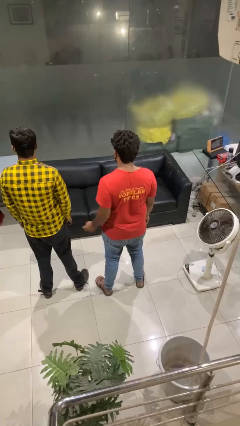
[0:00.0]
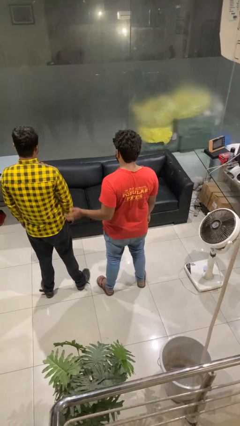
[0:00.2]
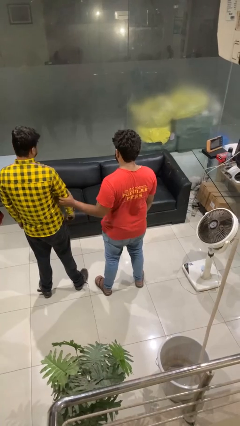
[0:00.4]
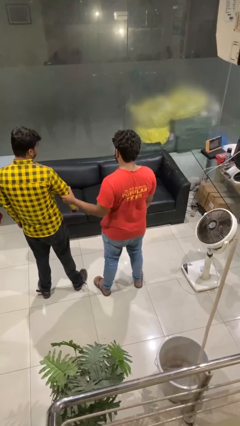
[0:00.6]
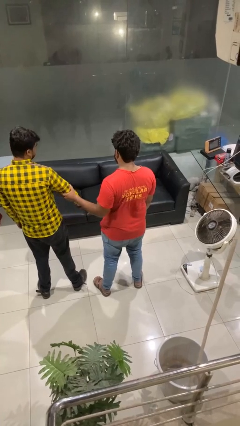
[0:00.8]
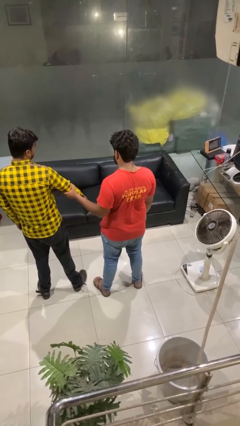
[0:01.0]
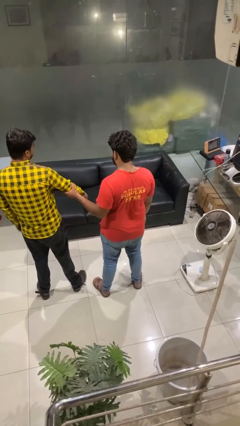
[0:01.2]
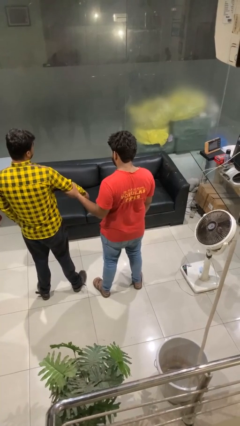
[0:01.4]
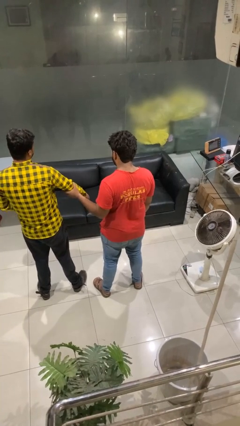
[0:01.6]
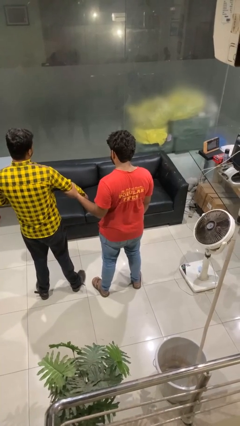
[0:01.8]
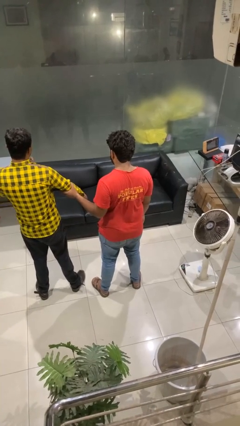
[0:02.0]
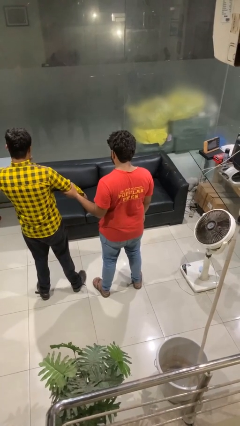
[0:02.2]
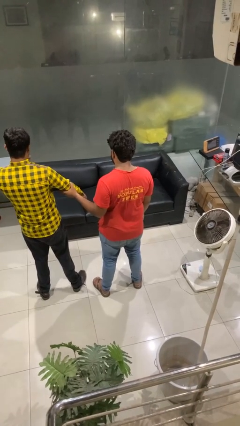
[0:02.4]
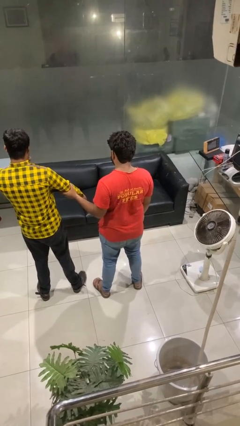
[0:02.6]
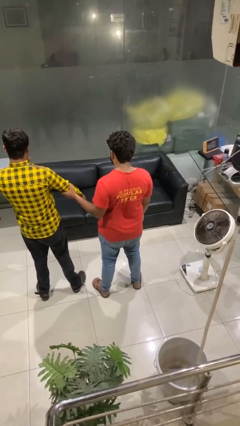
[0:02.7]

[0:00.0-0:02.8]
person grabs person by forearm

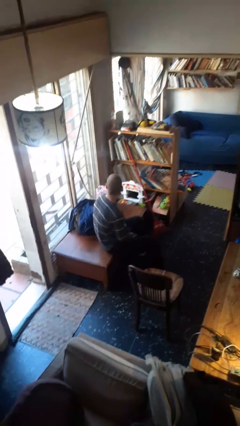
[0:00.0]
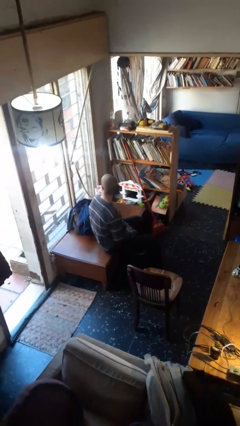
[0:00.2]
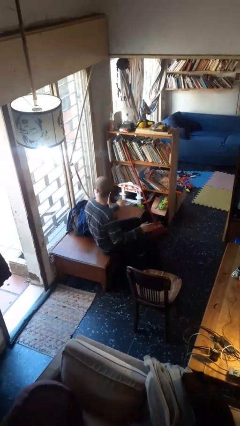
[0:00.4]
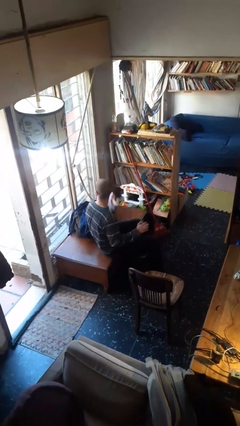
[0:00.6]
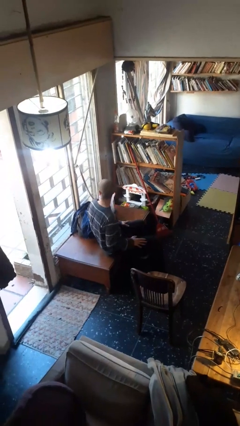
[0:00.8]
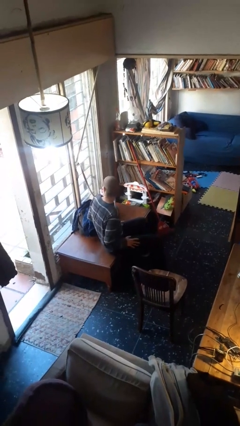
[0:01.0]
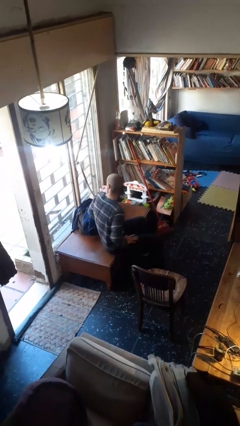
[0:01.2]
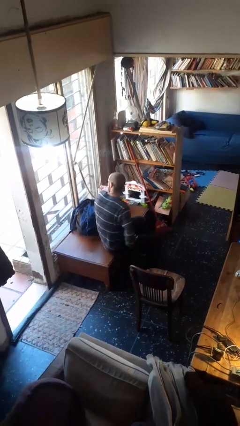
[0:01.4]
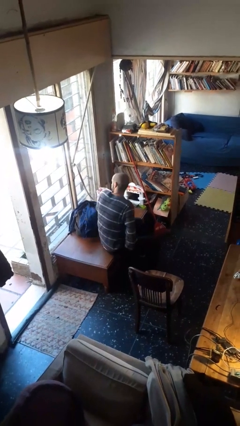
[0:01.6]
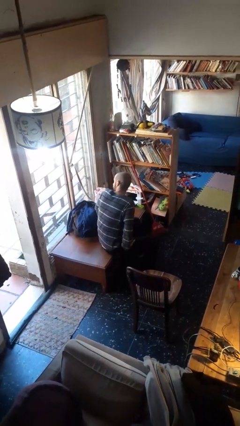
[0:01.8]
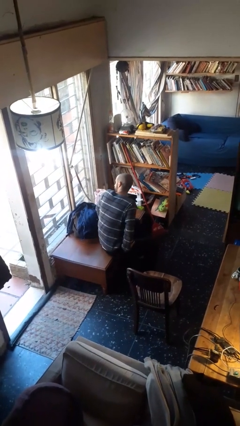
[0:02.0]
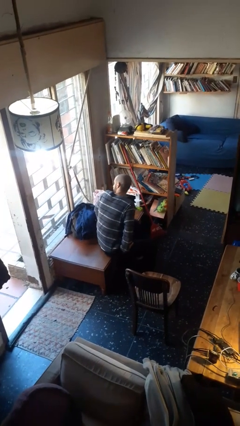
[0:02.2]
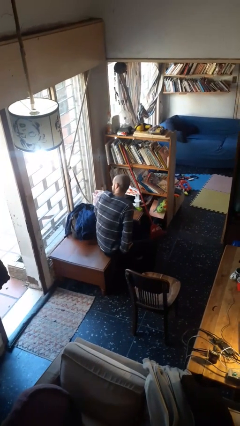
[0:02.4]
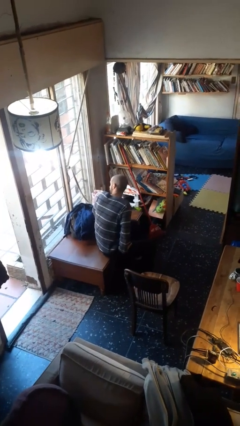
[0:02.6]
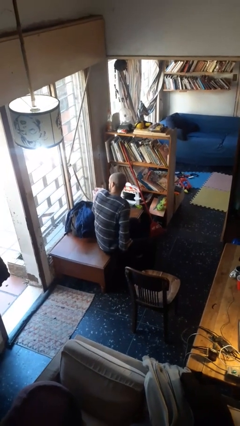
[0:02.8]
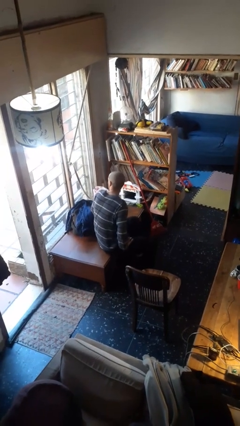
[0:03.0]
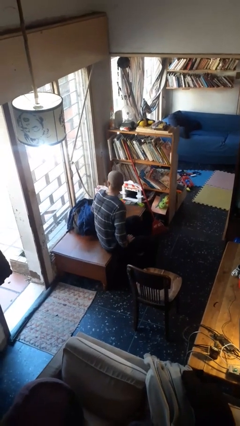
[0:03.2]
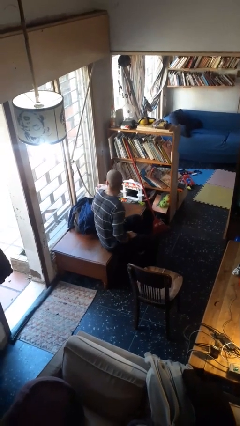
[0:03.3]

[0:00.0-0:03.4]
person slaps hands on thighs

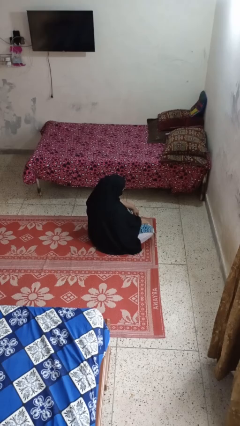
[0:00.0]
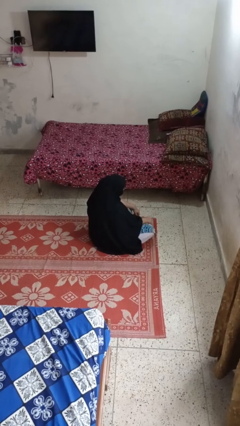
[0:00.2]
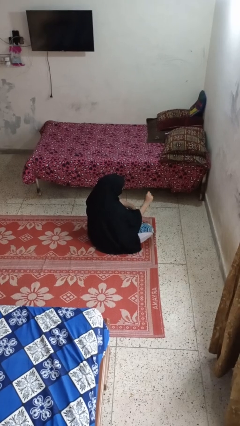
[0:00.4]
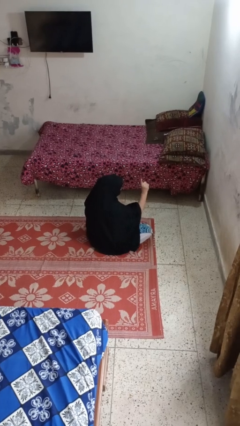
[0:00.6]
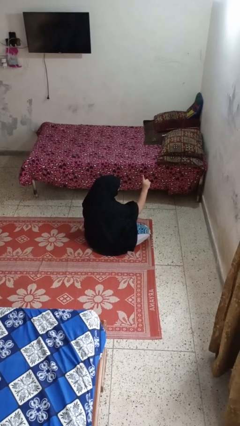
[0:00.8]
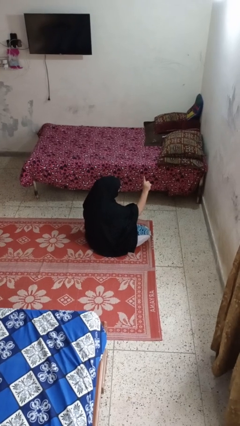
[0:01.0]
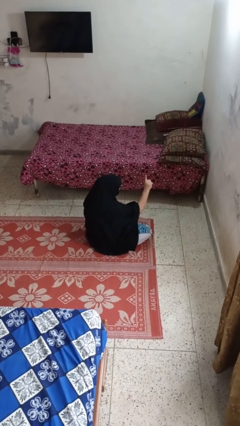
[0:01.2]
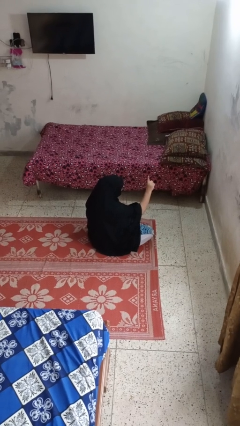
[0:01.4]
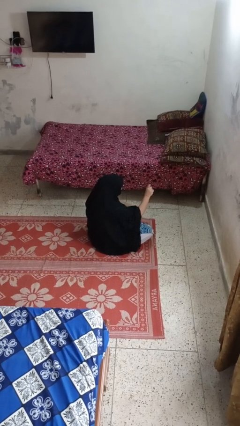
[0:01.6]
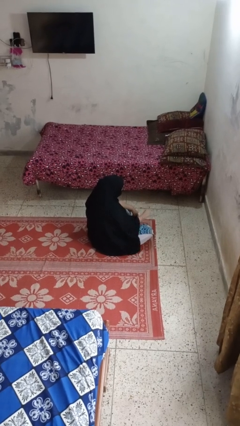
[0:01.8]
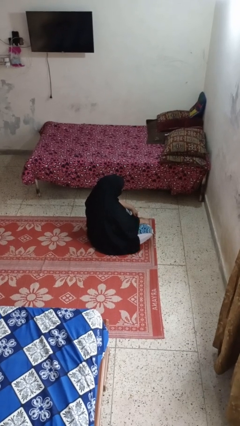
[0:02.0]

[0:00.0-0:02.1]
person gestures number one

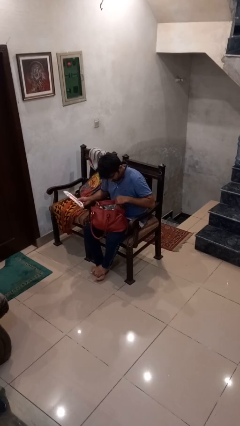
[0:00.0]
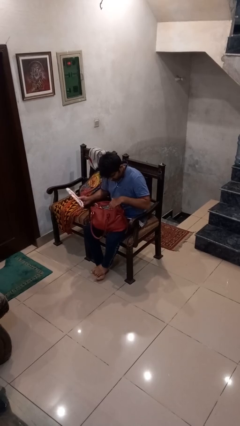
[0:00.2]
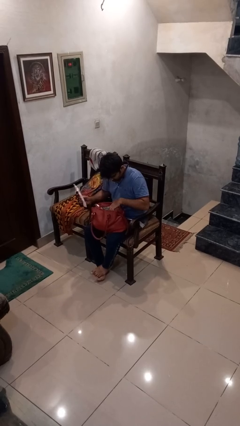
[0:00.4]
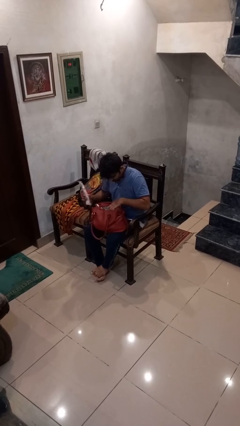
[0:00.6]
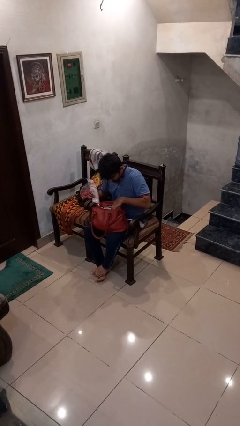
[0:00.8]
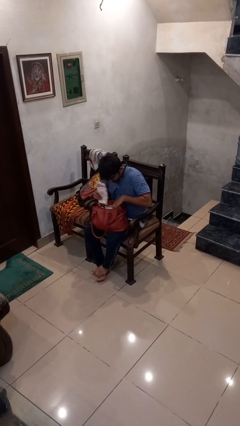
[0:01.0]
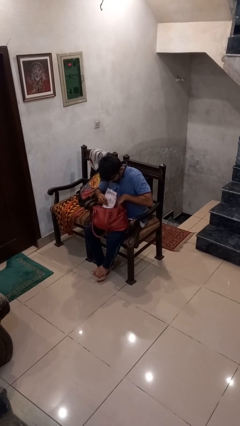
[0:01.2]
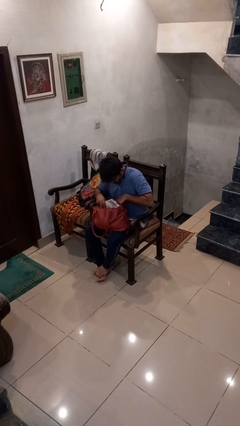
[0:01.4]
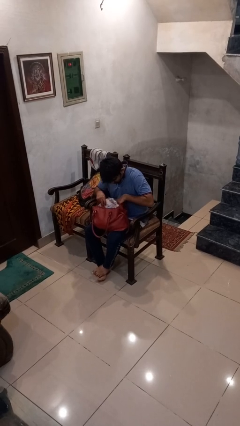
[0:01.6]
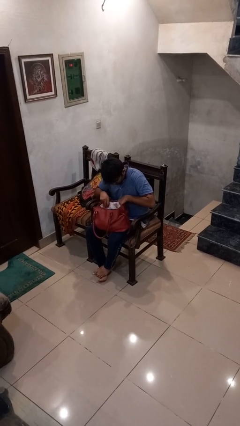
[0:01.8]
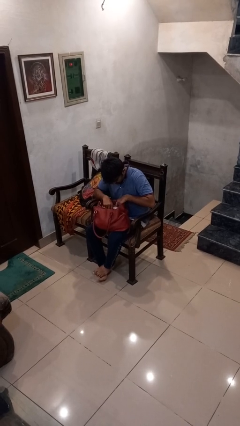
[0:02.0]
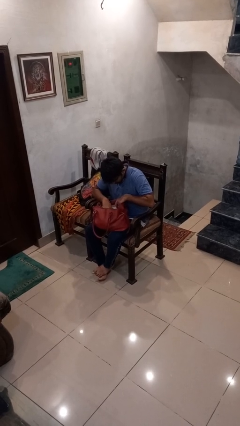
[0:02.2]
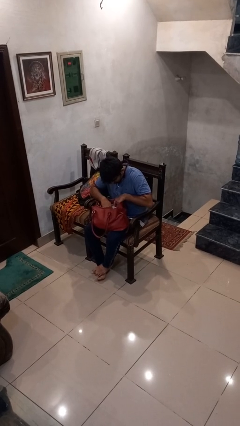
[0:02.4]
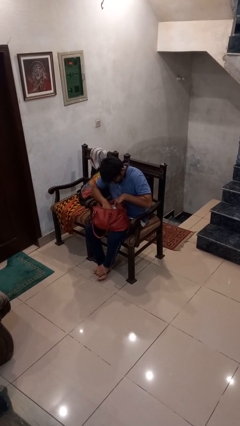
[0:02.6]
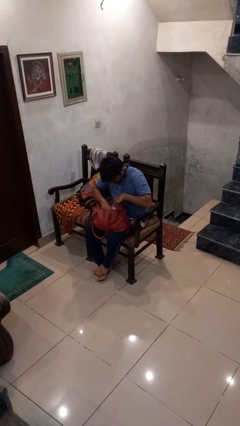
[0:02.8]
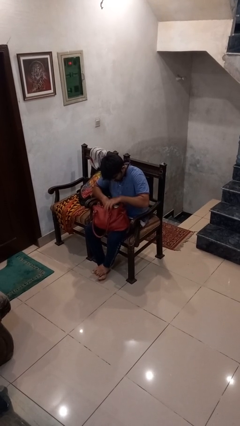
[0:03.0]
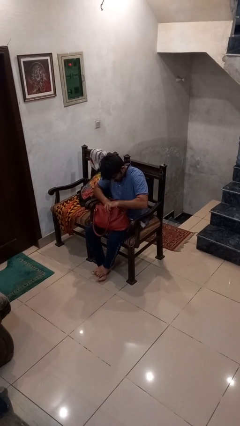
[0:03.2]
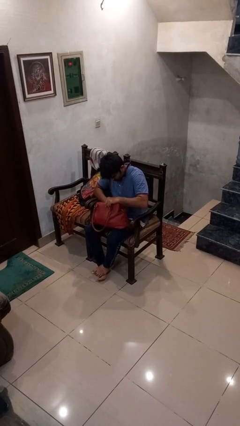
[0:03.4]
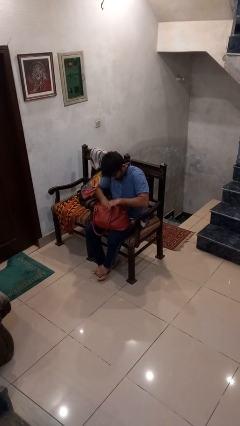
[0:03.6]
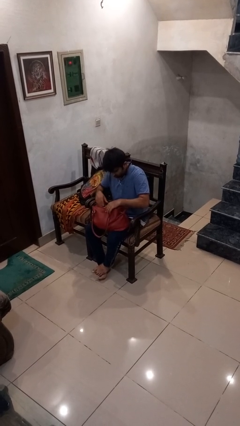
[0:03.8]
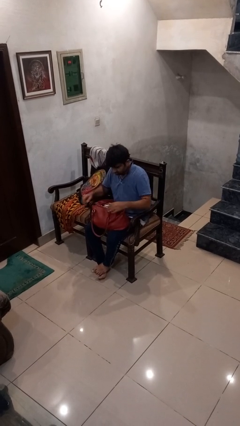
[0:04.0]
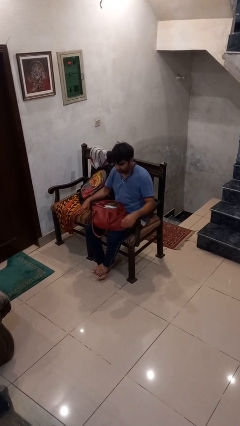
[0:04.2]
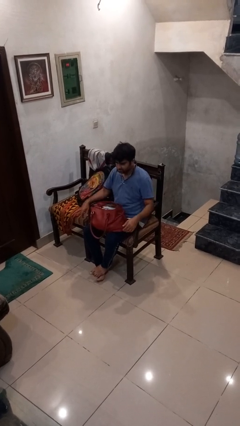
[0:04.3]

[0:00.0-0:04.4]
person puts object into purse

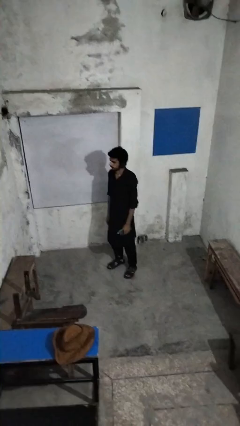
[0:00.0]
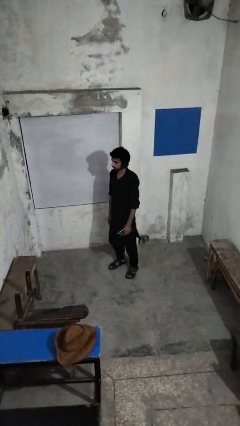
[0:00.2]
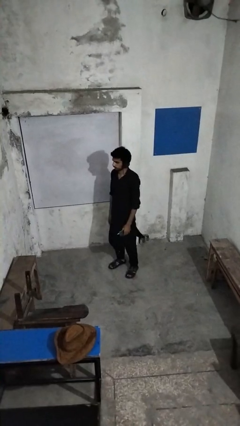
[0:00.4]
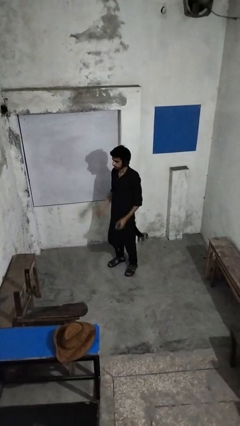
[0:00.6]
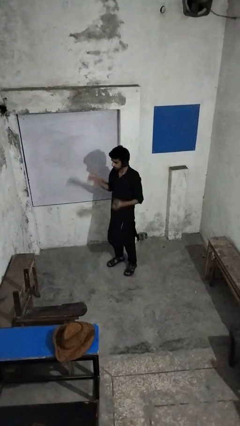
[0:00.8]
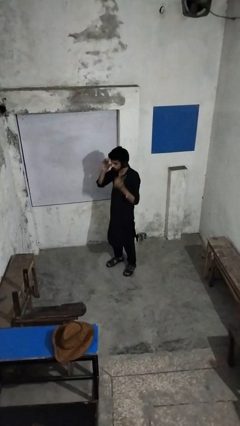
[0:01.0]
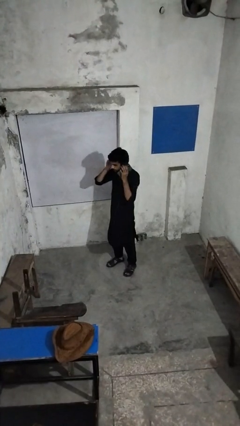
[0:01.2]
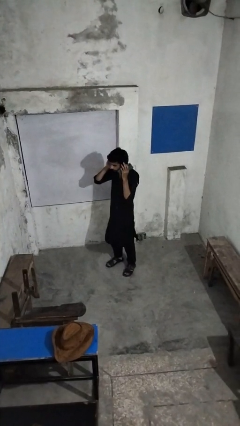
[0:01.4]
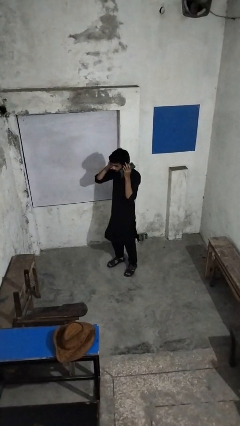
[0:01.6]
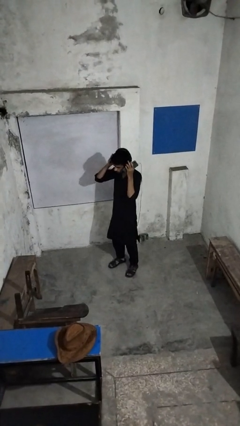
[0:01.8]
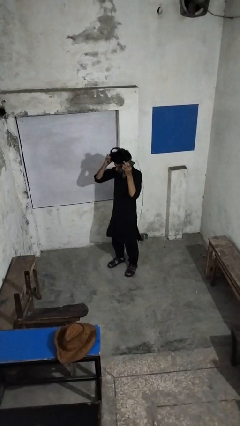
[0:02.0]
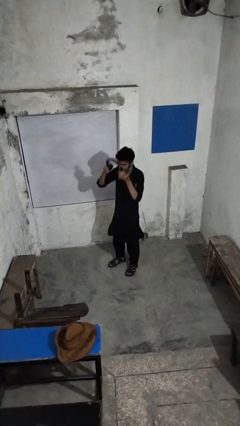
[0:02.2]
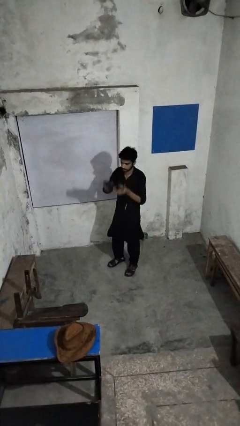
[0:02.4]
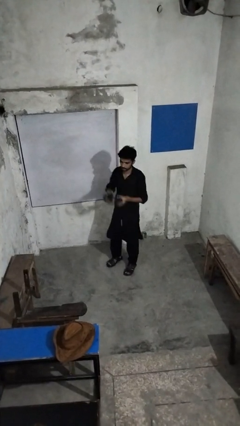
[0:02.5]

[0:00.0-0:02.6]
person takes off headphones

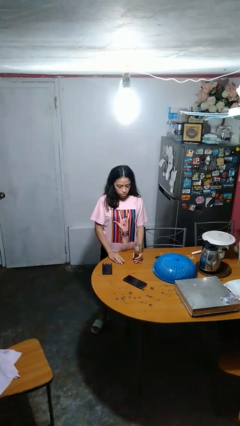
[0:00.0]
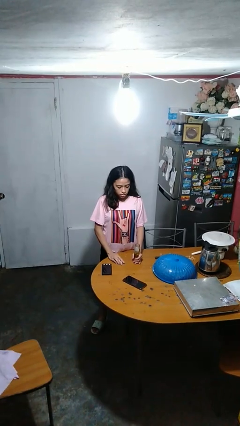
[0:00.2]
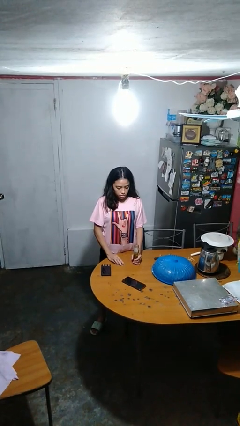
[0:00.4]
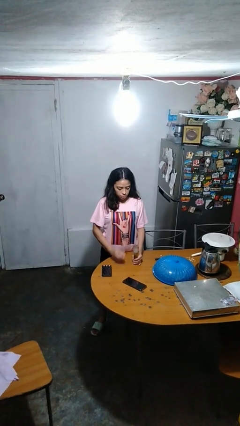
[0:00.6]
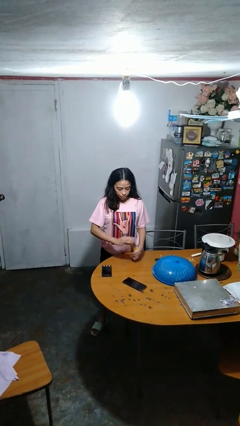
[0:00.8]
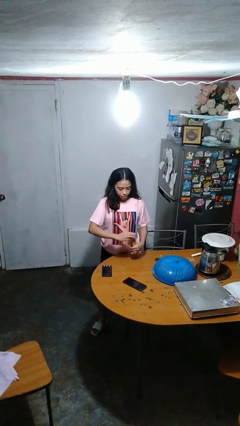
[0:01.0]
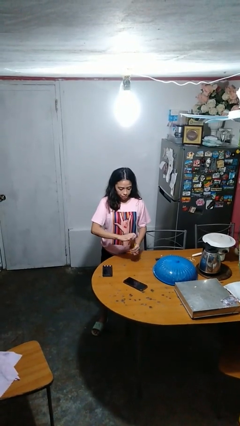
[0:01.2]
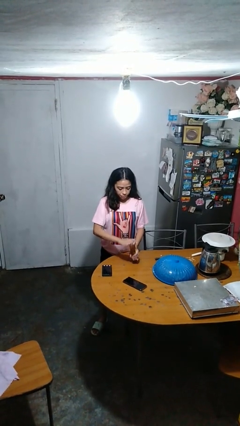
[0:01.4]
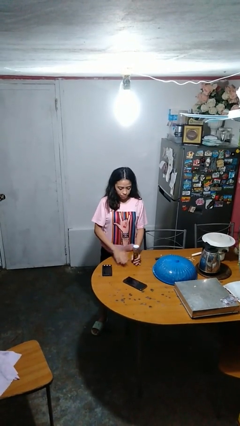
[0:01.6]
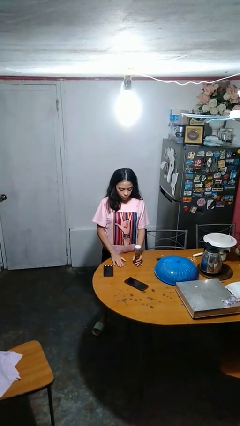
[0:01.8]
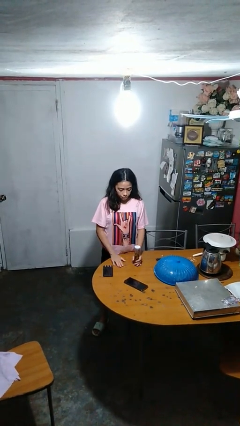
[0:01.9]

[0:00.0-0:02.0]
person closes jar

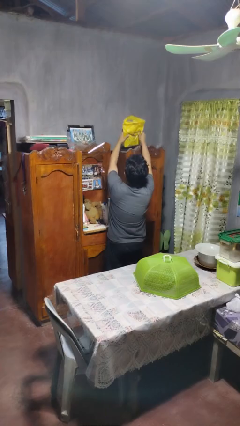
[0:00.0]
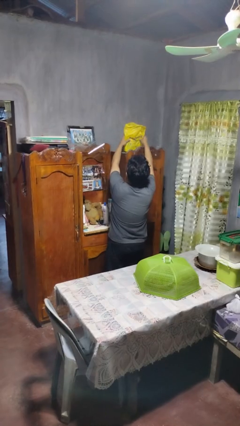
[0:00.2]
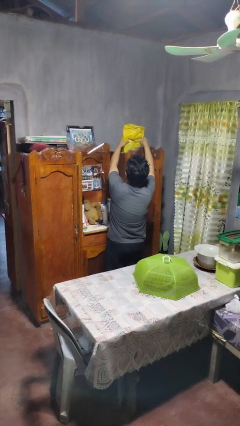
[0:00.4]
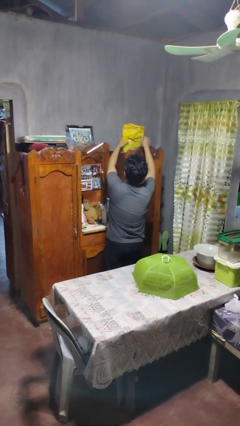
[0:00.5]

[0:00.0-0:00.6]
person puts down object on shelf
